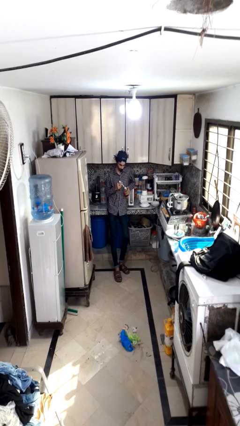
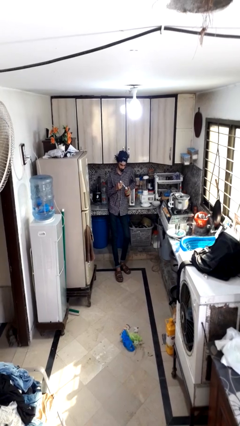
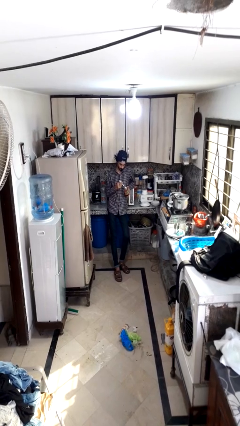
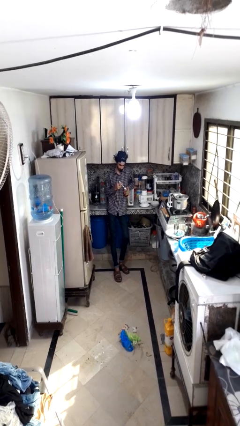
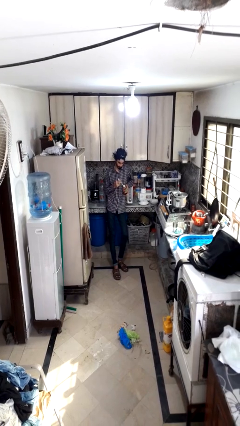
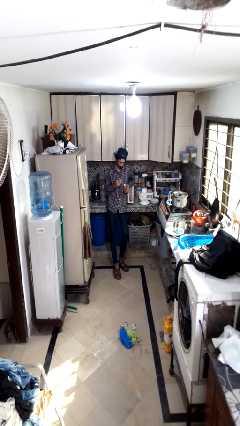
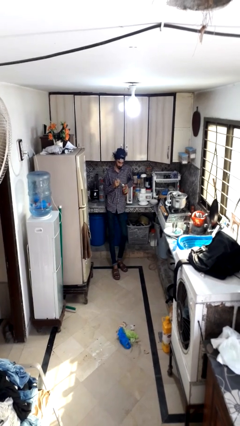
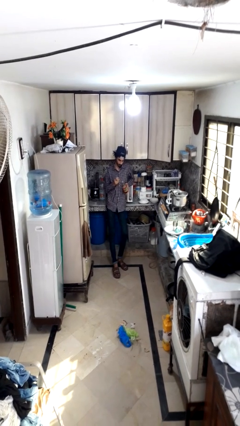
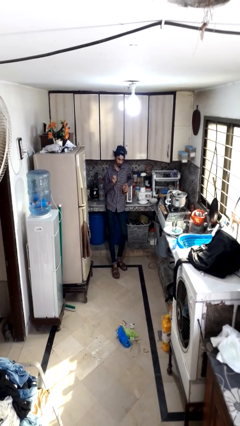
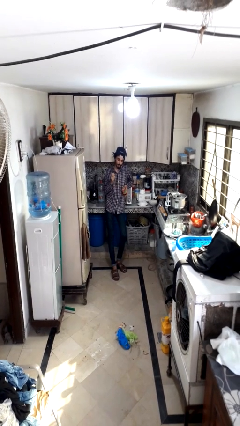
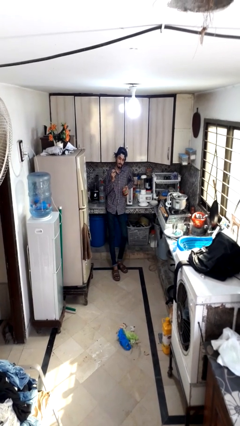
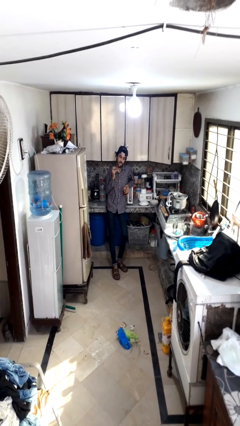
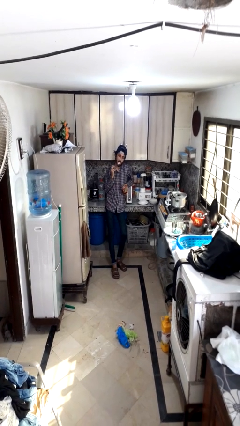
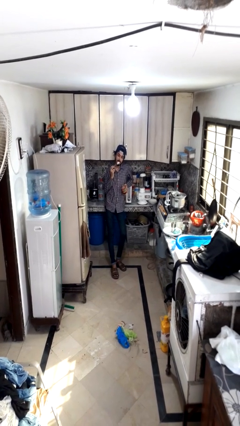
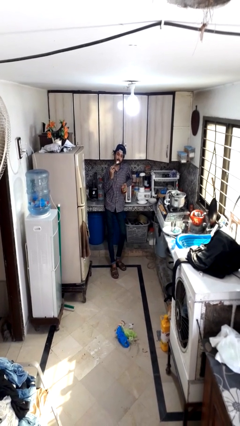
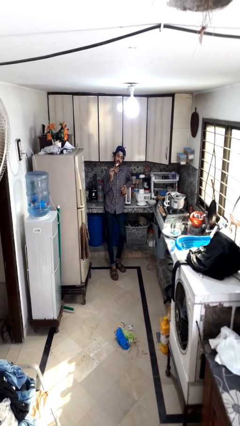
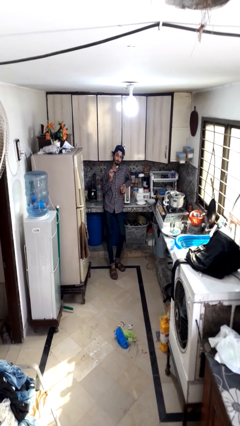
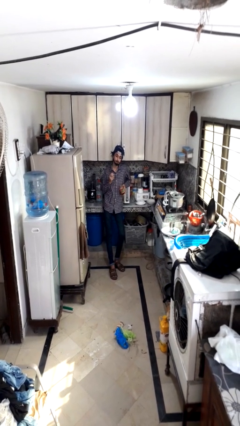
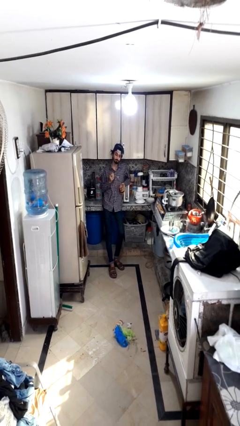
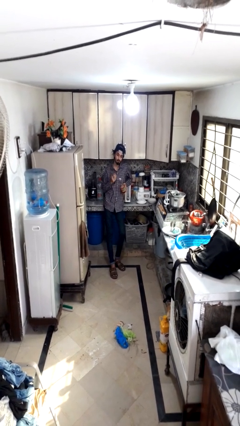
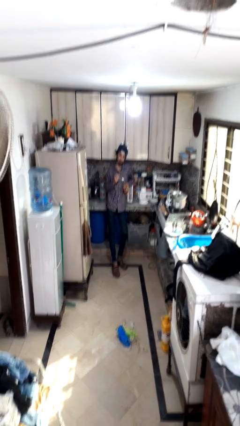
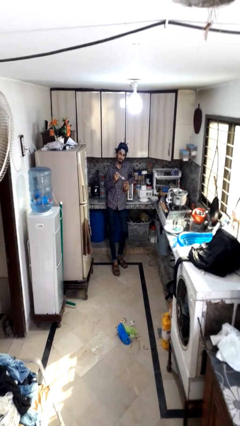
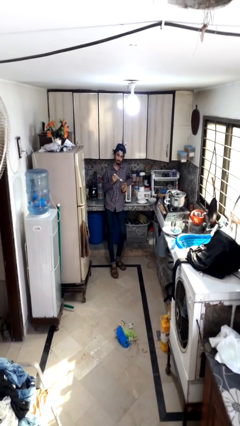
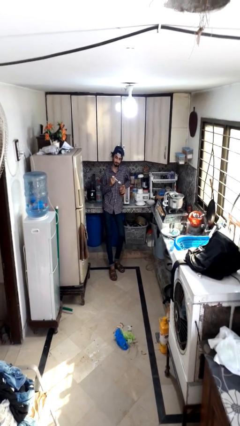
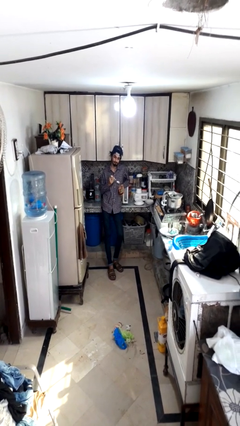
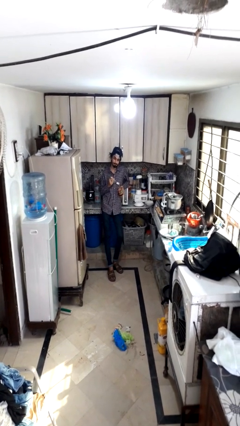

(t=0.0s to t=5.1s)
person eats with utensil

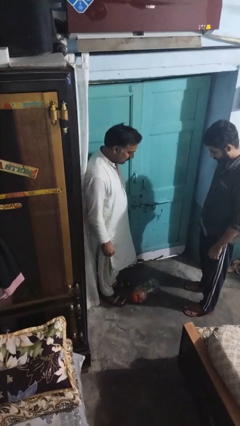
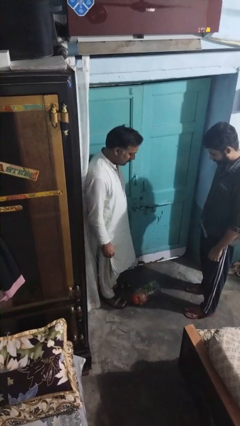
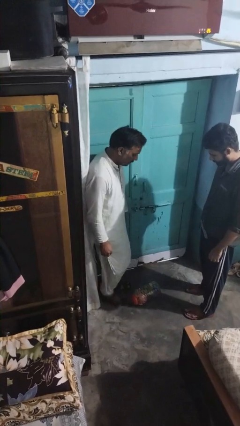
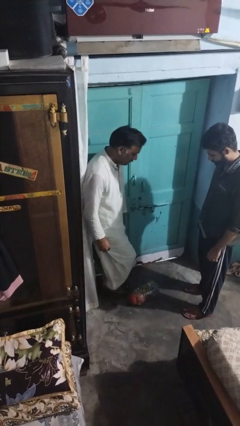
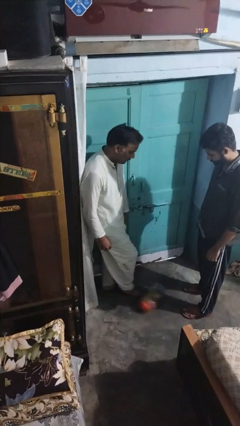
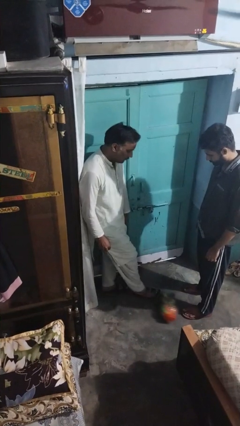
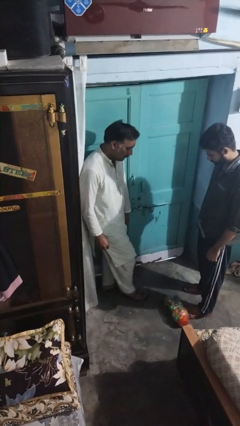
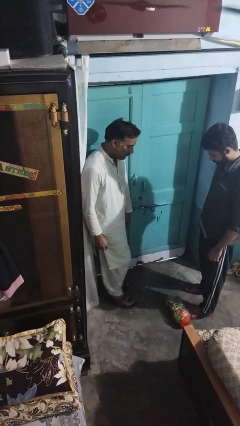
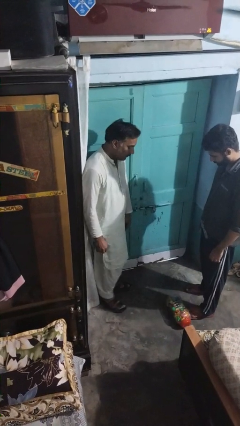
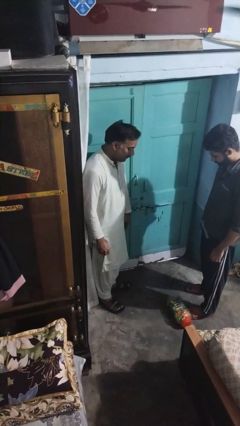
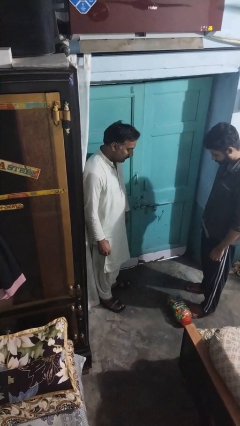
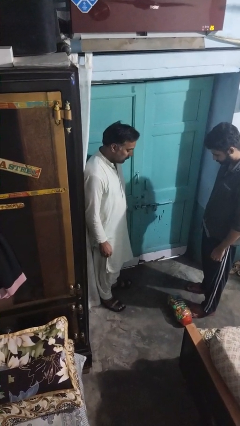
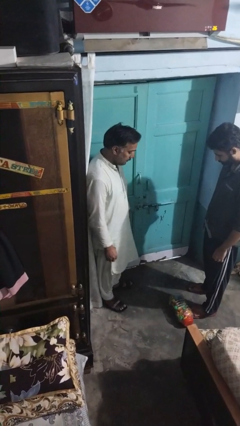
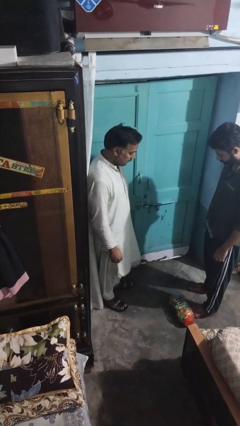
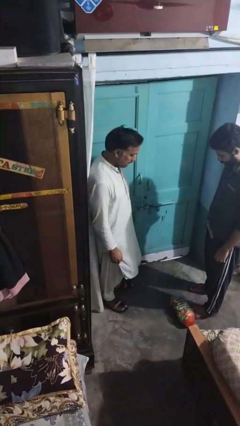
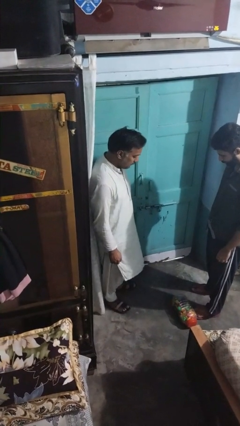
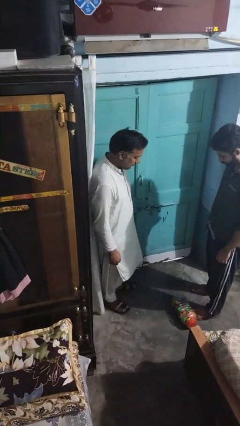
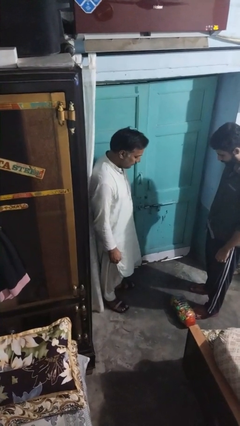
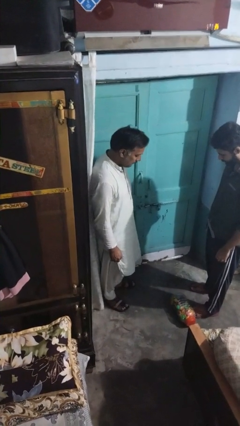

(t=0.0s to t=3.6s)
person kicks object to person

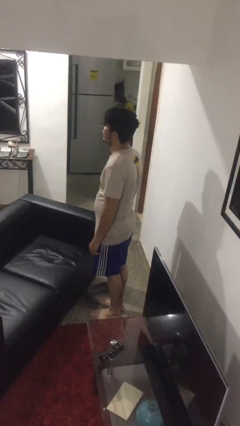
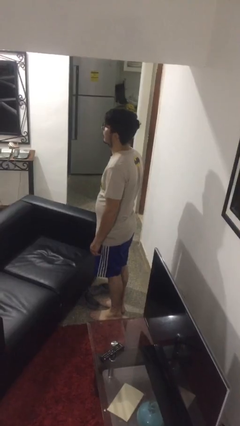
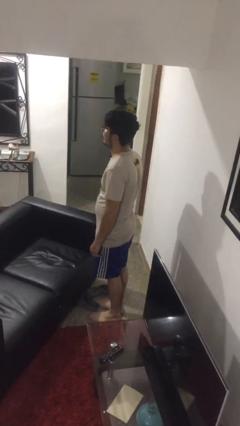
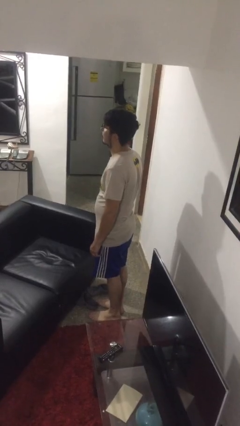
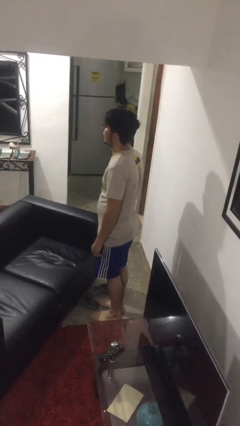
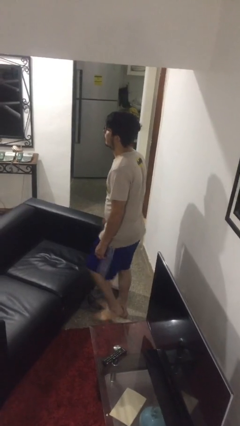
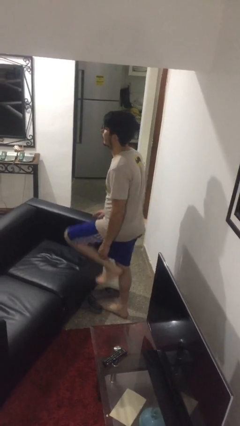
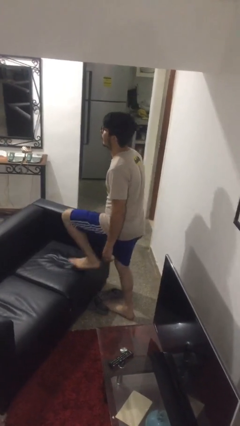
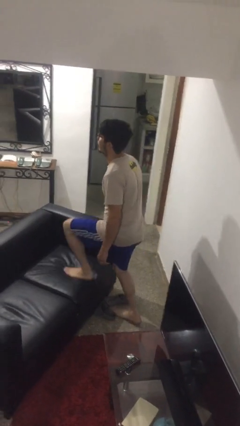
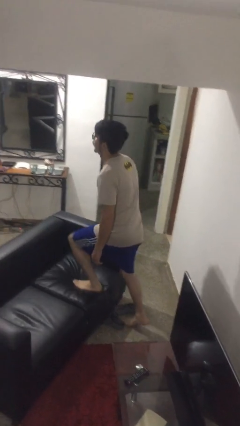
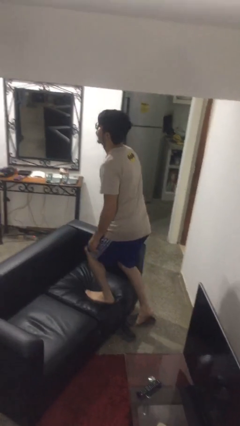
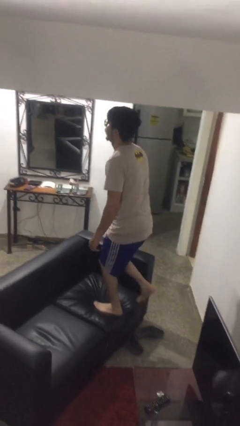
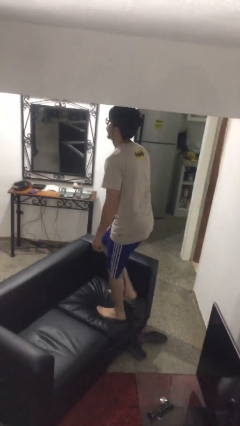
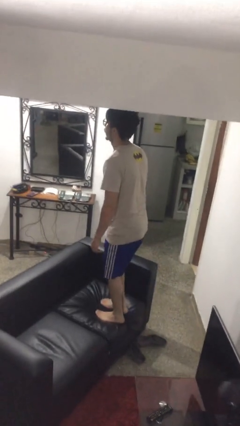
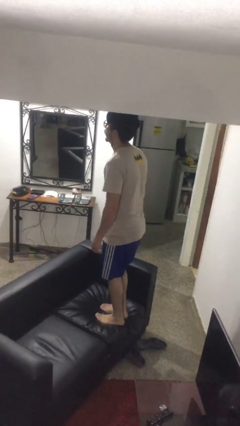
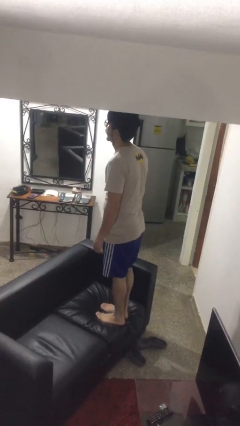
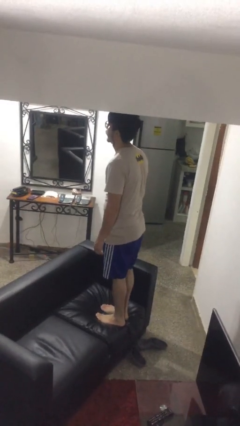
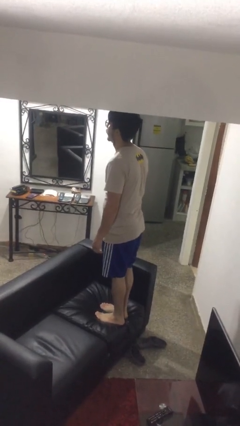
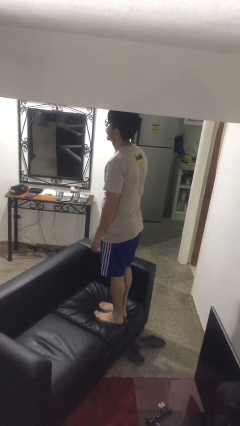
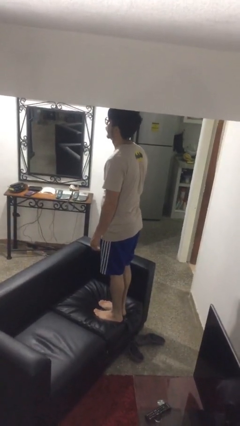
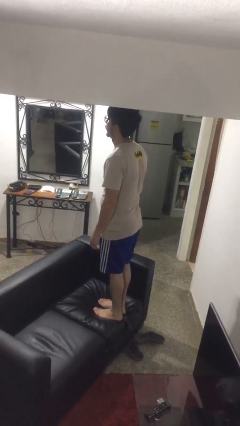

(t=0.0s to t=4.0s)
person climbs on couch

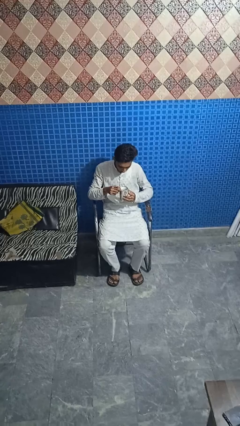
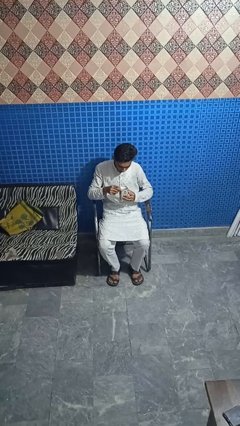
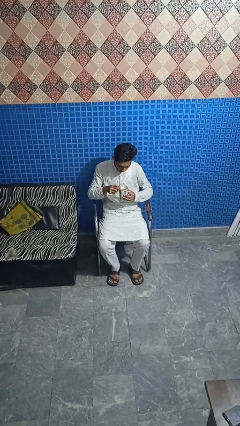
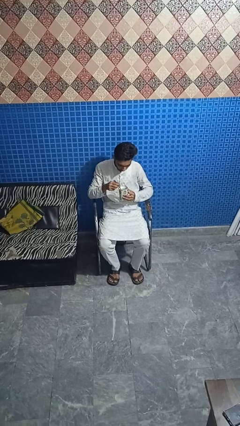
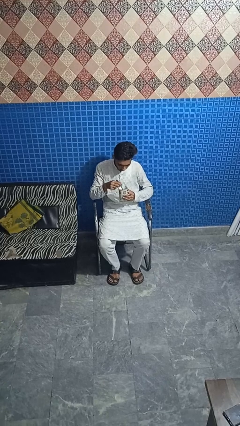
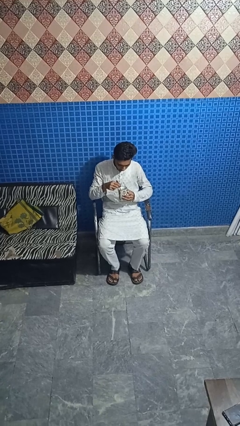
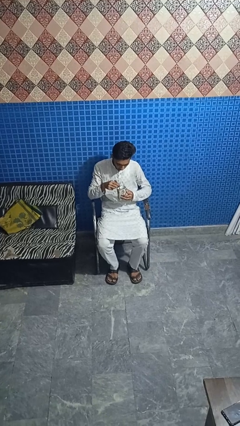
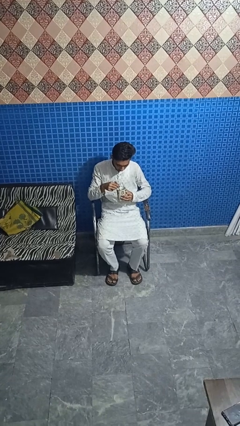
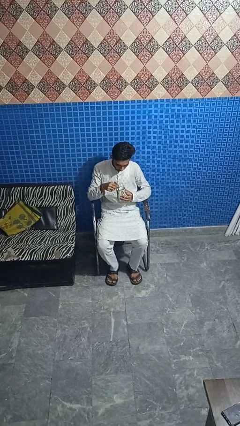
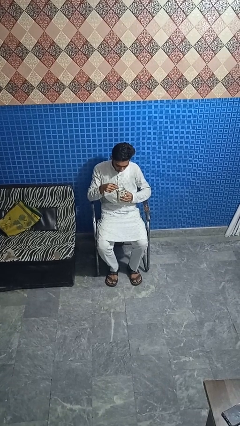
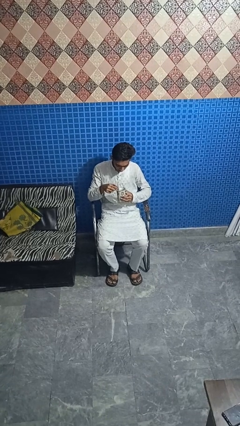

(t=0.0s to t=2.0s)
person stirs mug

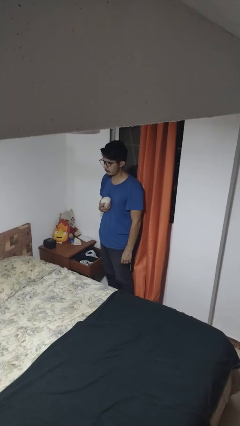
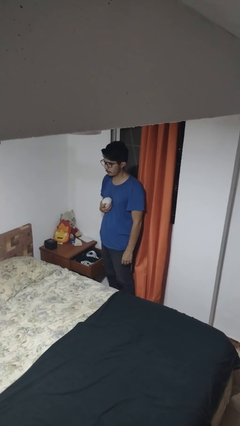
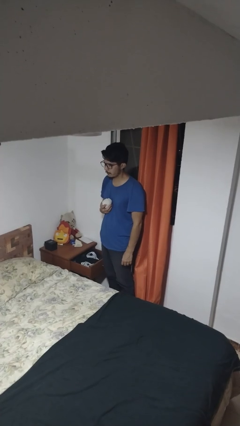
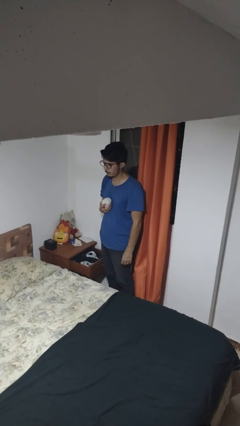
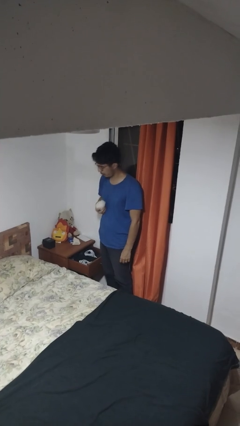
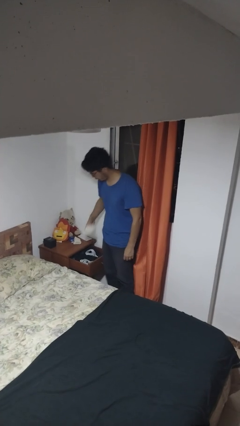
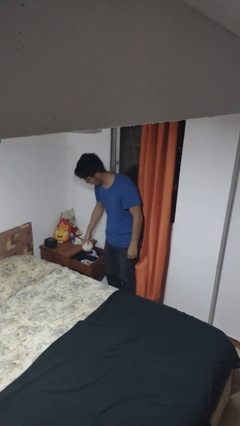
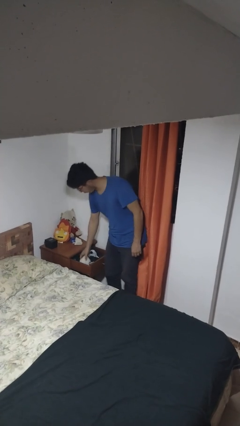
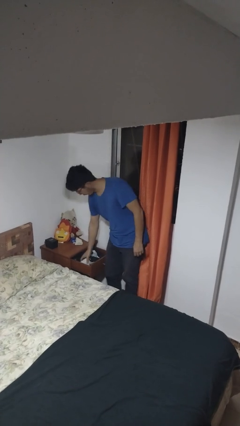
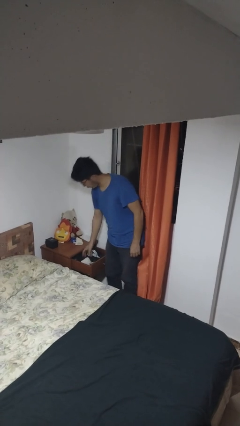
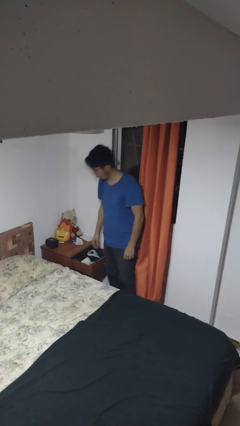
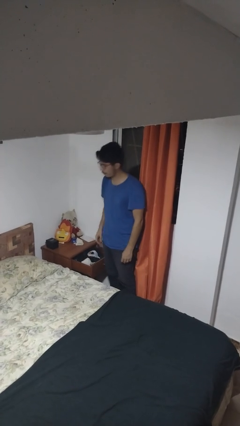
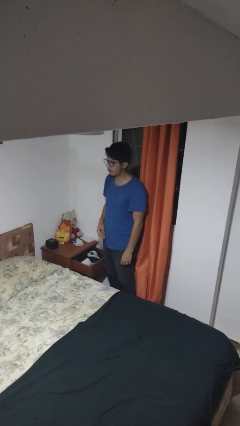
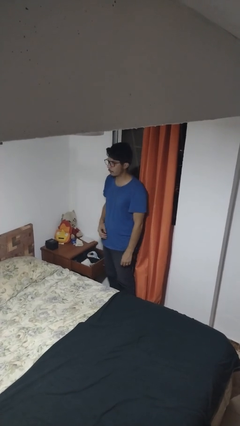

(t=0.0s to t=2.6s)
person puts clothes into dresser
